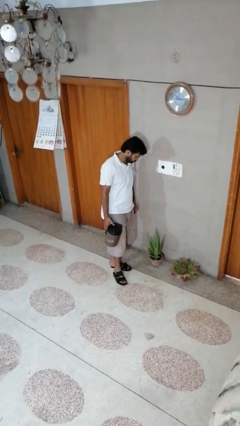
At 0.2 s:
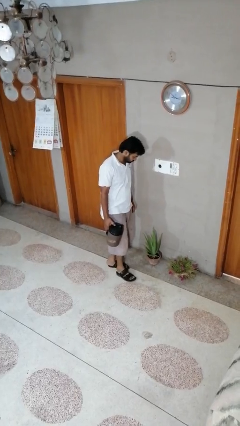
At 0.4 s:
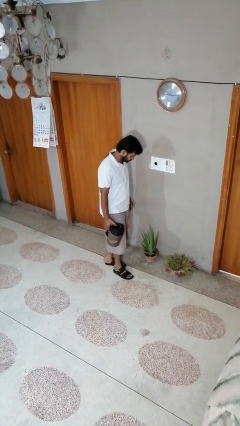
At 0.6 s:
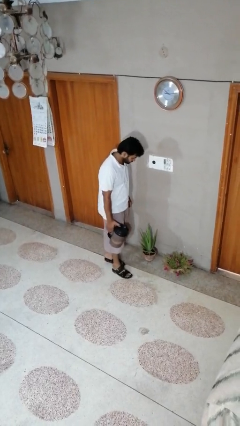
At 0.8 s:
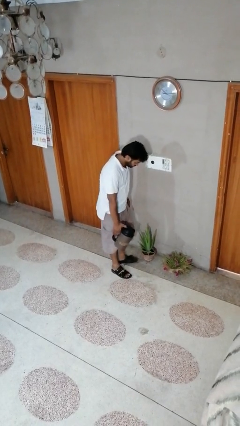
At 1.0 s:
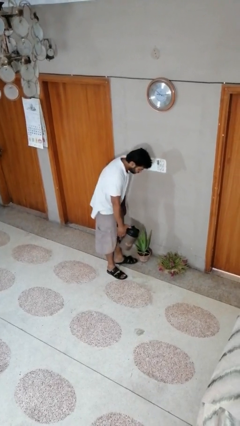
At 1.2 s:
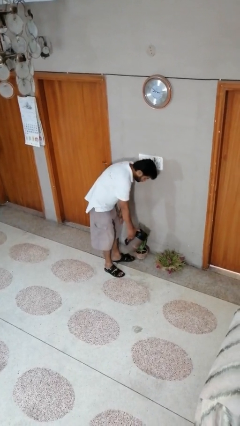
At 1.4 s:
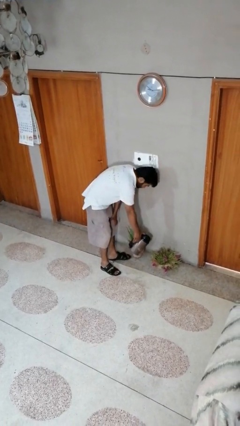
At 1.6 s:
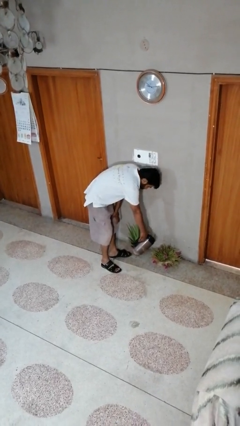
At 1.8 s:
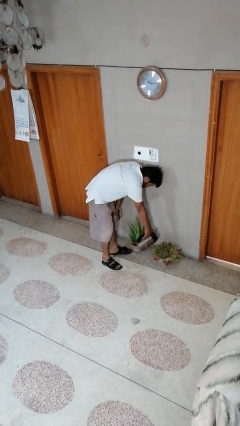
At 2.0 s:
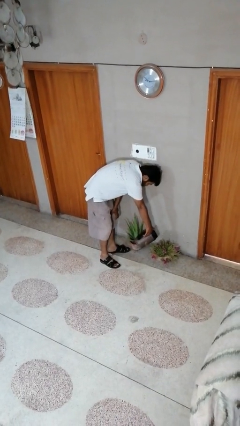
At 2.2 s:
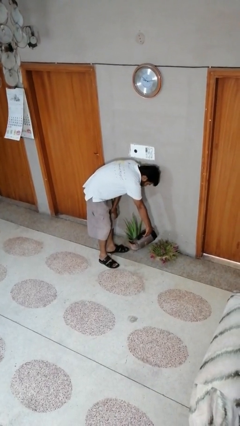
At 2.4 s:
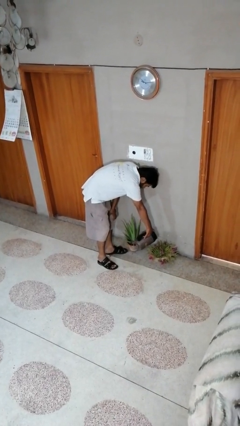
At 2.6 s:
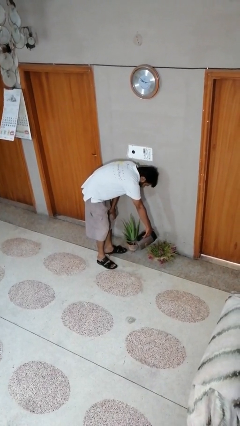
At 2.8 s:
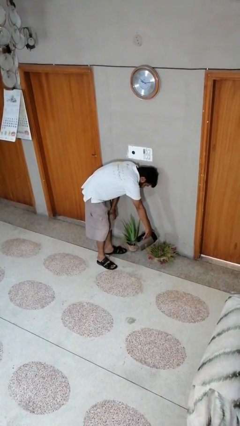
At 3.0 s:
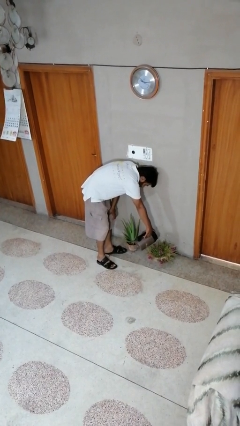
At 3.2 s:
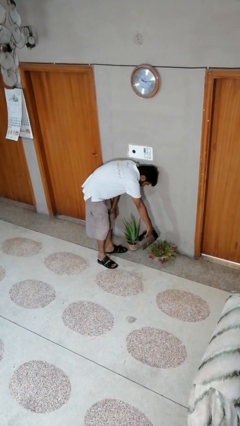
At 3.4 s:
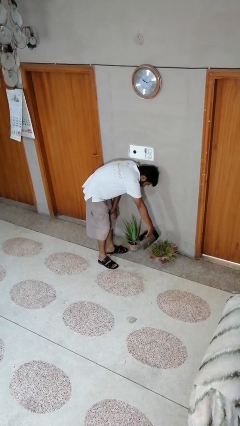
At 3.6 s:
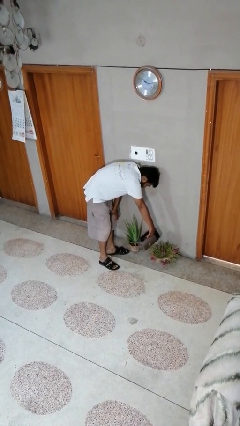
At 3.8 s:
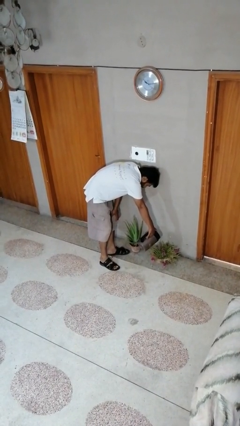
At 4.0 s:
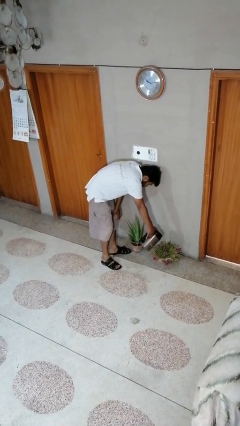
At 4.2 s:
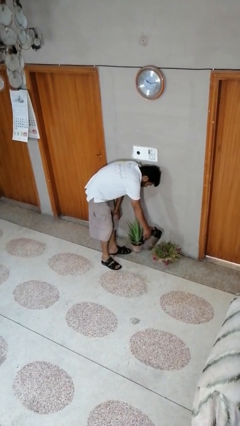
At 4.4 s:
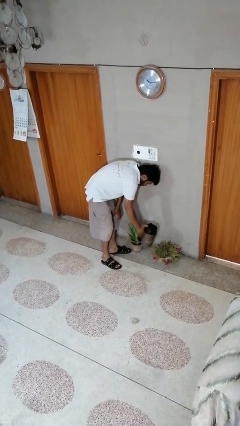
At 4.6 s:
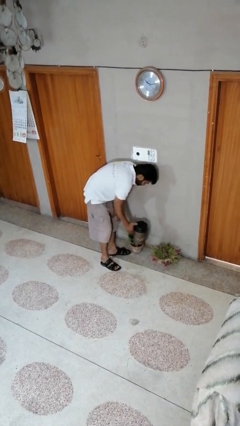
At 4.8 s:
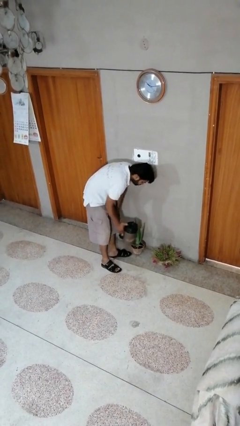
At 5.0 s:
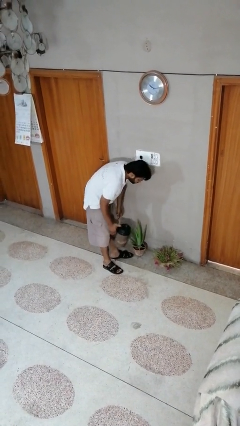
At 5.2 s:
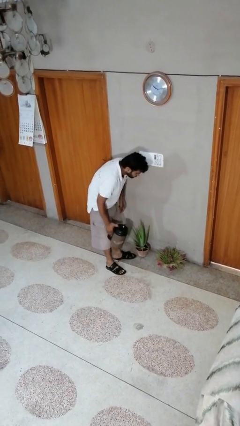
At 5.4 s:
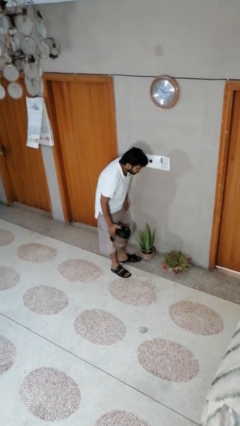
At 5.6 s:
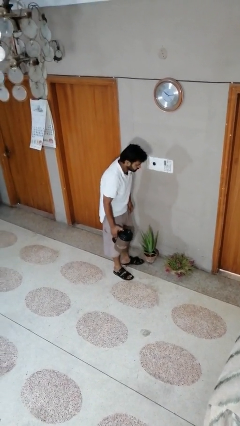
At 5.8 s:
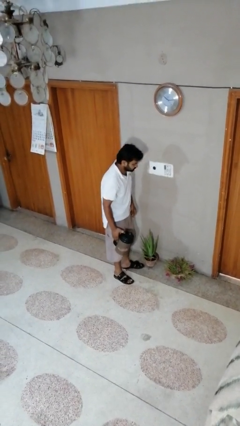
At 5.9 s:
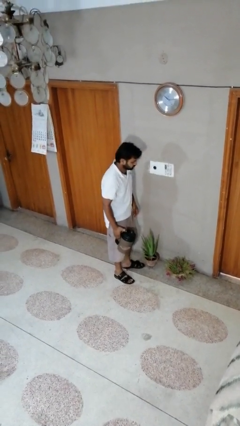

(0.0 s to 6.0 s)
person waters houseplant

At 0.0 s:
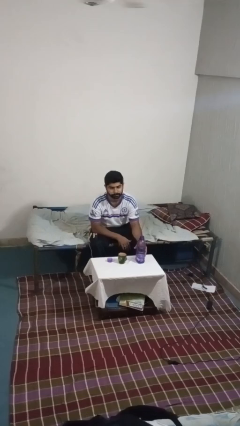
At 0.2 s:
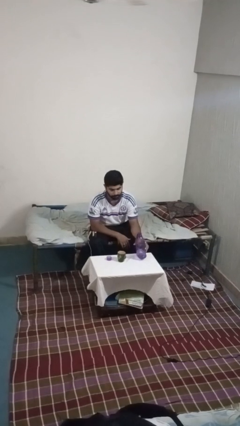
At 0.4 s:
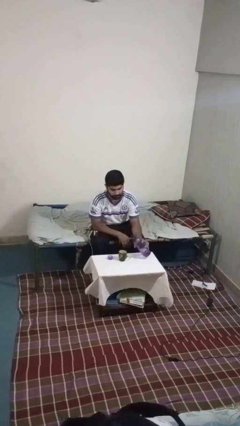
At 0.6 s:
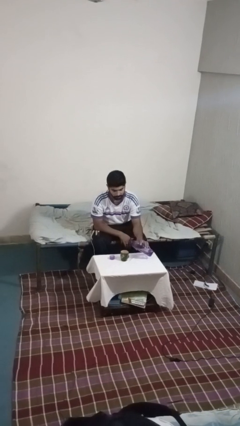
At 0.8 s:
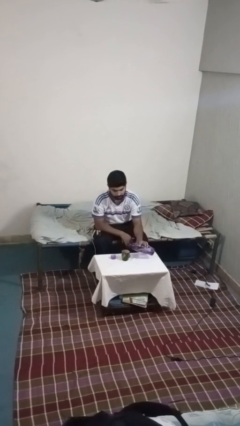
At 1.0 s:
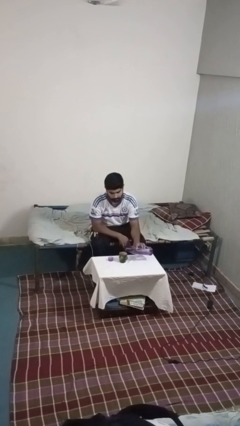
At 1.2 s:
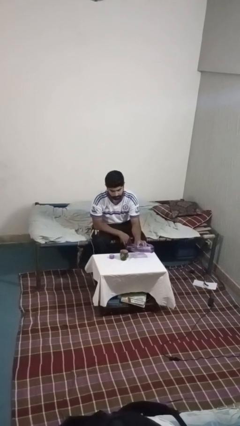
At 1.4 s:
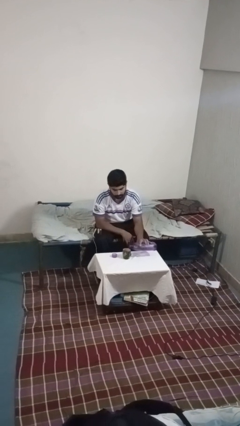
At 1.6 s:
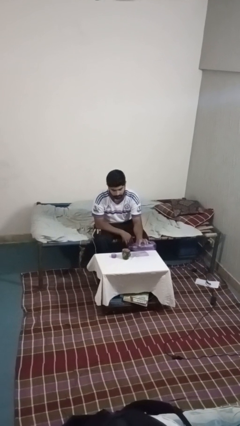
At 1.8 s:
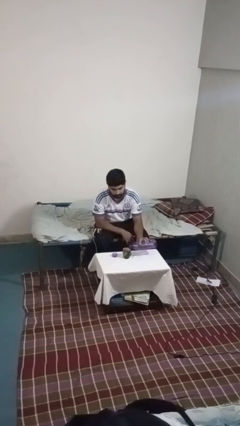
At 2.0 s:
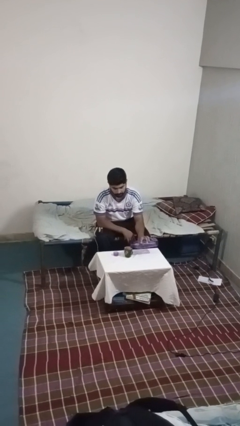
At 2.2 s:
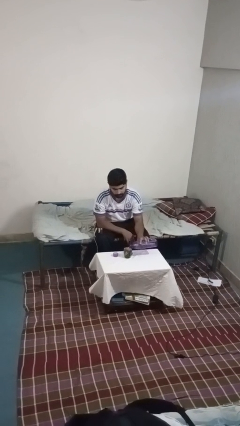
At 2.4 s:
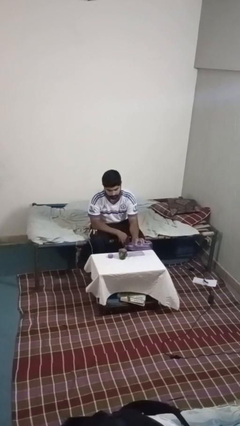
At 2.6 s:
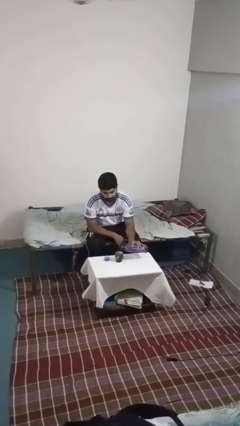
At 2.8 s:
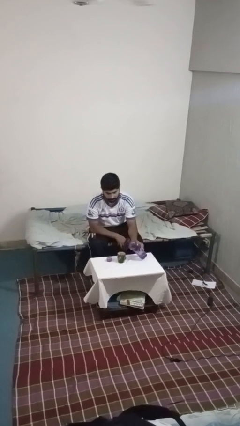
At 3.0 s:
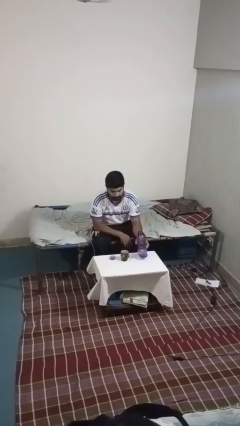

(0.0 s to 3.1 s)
person pours liquid into cup

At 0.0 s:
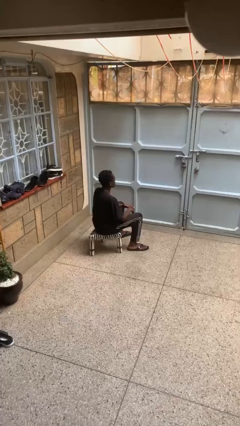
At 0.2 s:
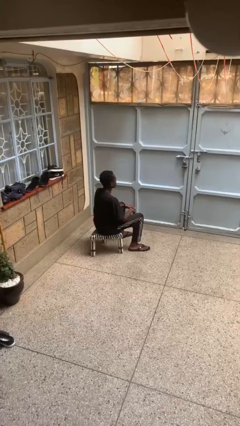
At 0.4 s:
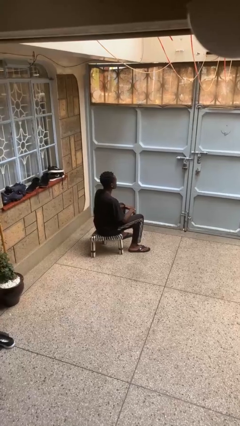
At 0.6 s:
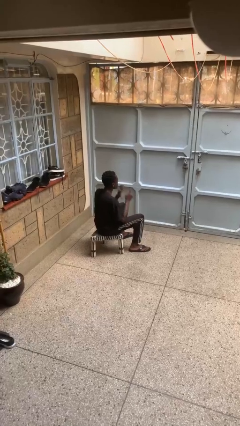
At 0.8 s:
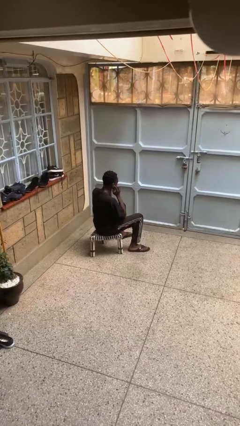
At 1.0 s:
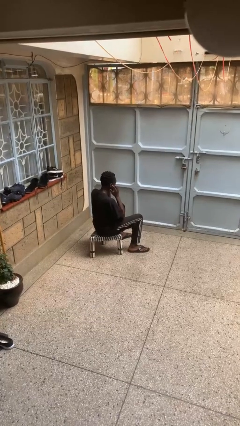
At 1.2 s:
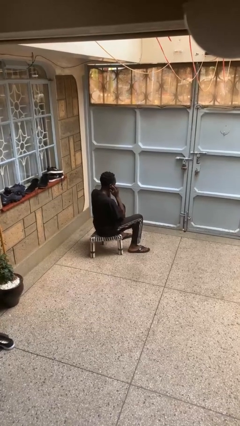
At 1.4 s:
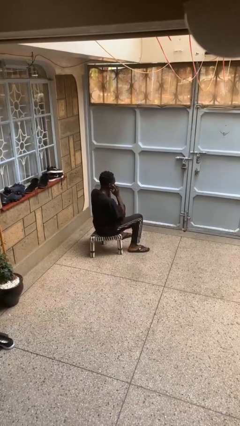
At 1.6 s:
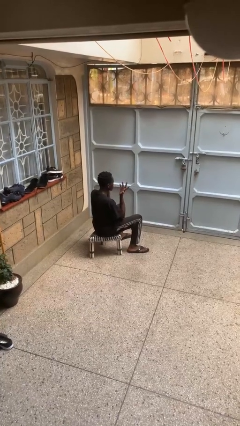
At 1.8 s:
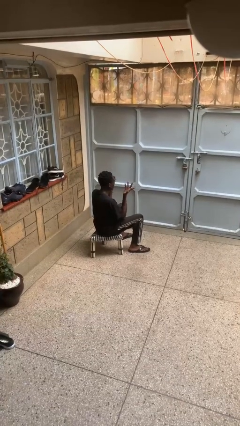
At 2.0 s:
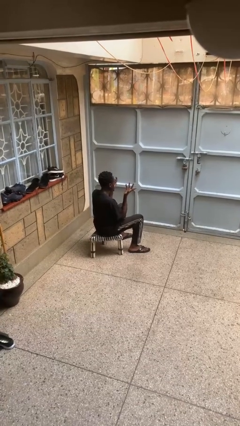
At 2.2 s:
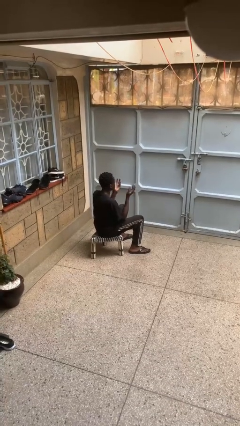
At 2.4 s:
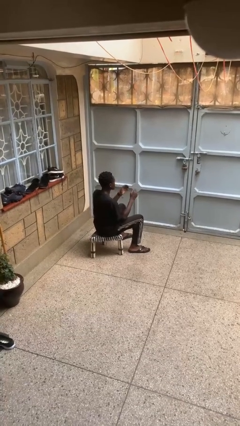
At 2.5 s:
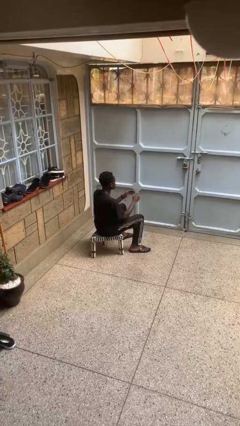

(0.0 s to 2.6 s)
person puts fingers in ear

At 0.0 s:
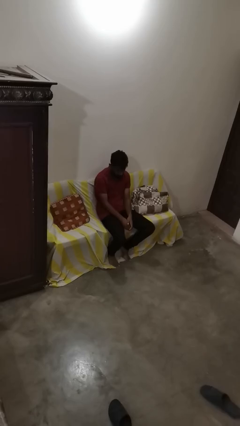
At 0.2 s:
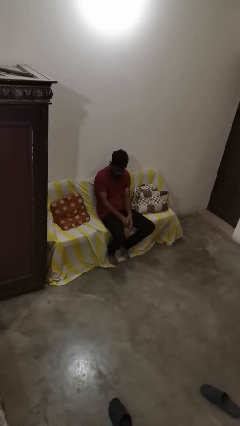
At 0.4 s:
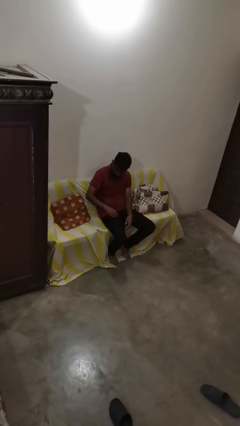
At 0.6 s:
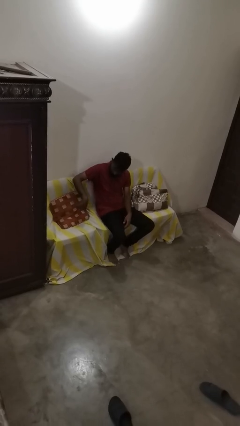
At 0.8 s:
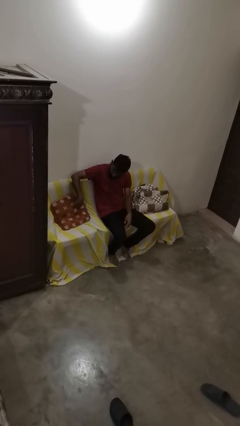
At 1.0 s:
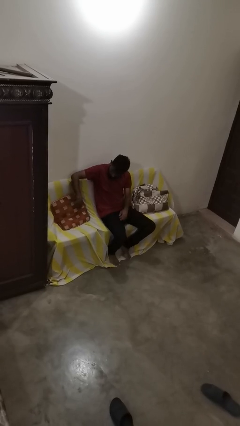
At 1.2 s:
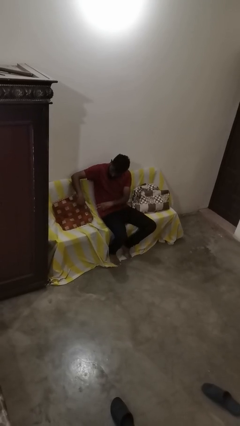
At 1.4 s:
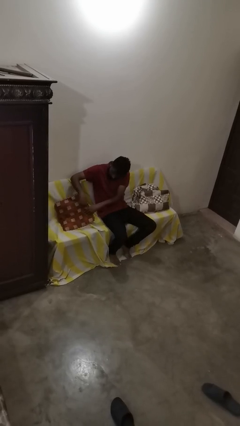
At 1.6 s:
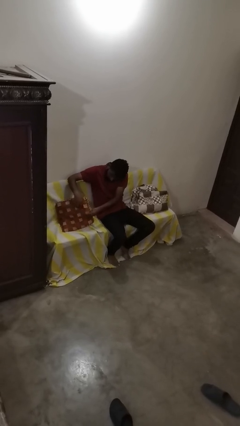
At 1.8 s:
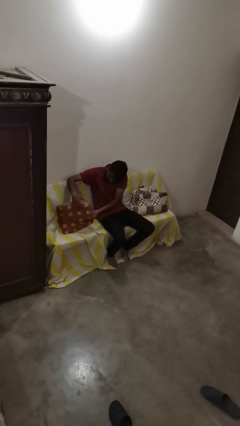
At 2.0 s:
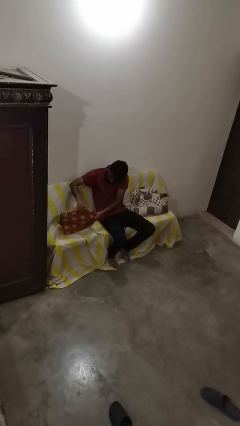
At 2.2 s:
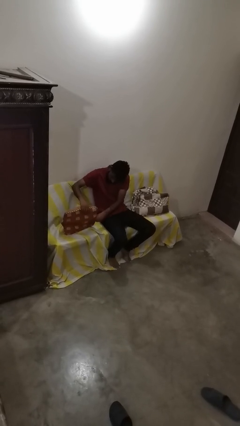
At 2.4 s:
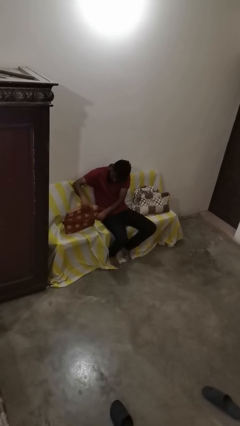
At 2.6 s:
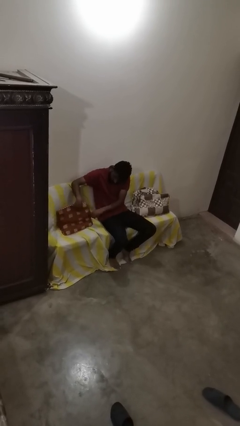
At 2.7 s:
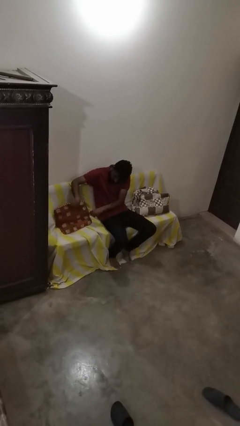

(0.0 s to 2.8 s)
person searches in couch

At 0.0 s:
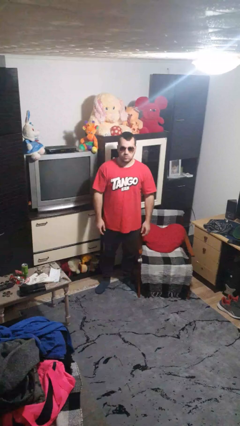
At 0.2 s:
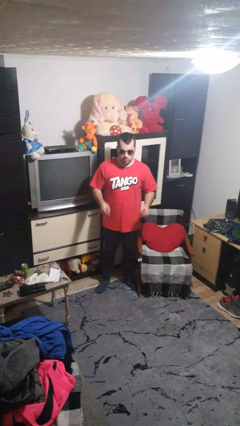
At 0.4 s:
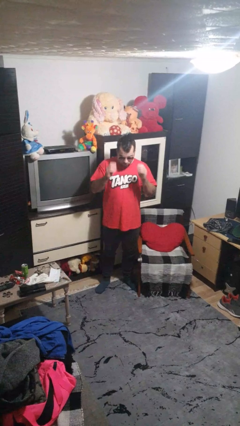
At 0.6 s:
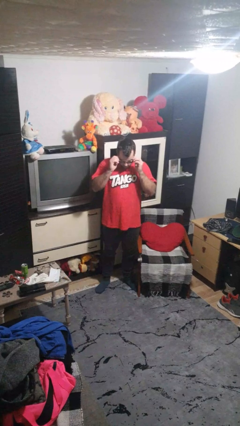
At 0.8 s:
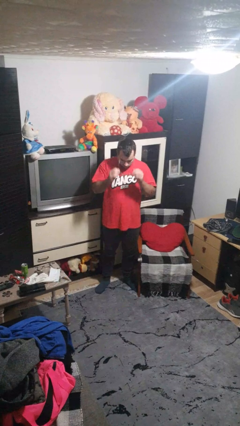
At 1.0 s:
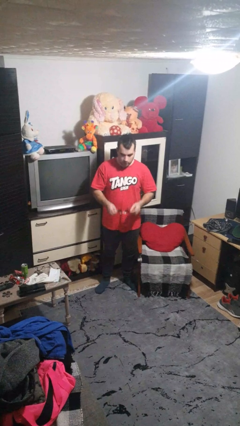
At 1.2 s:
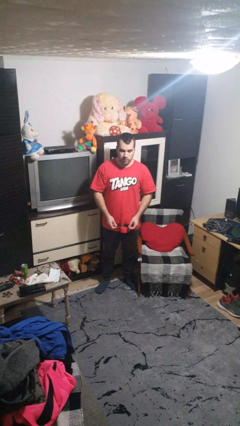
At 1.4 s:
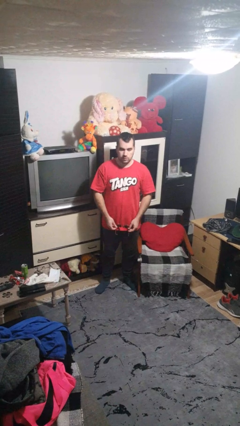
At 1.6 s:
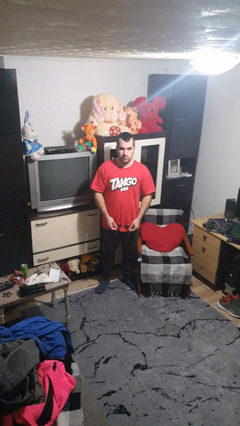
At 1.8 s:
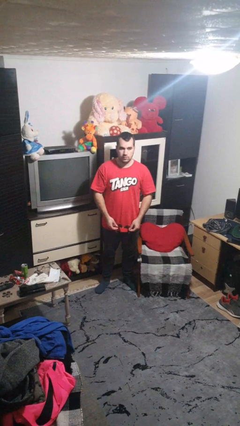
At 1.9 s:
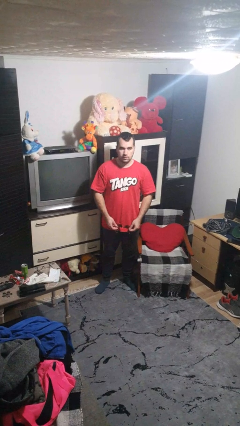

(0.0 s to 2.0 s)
person takes off sunglasses

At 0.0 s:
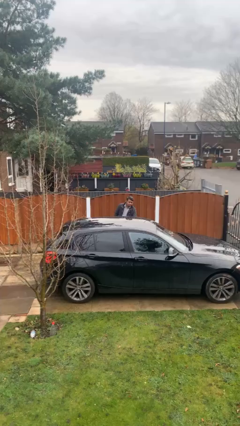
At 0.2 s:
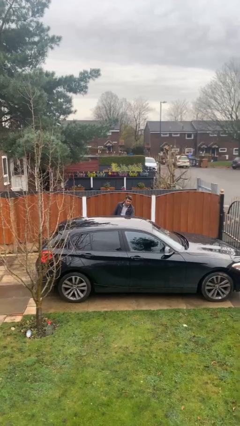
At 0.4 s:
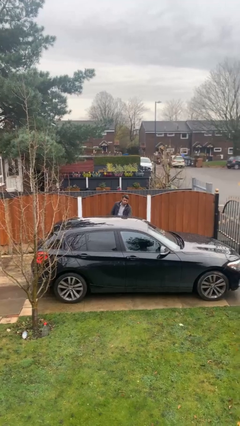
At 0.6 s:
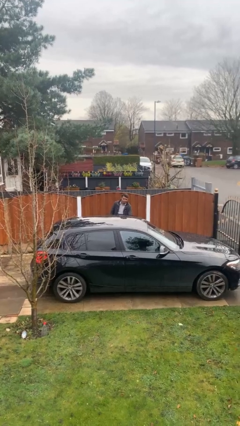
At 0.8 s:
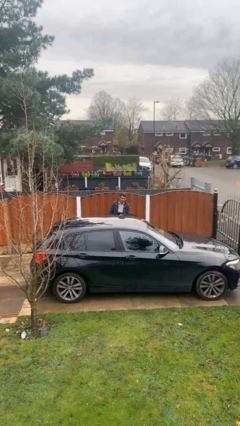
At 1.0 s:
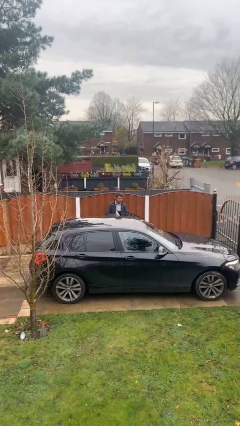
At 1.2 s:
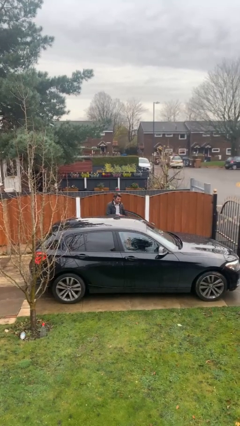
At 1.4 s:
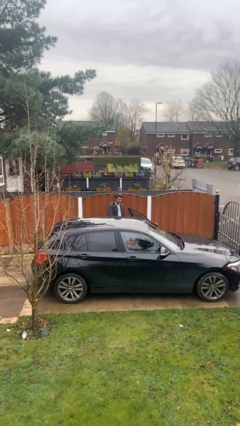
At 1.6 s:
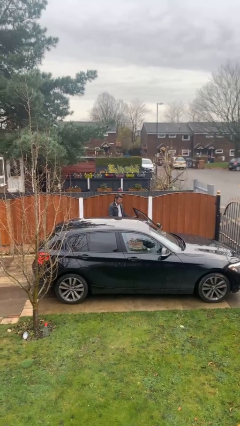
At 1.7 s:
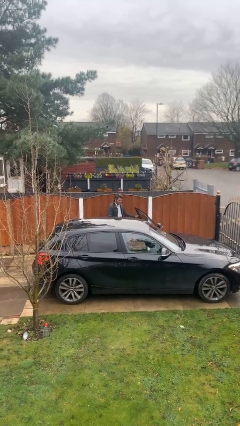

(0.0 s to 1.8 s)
person opens car door
